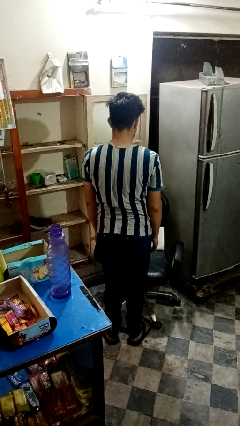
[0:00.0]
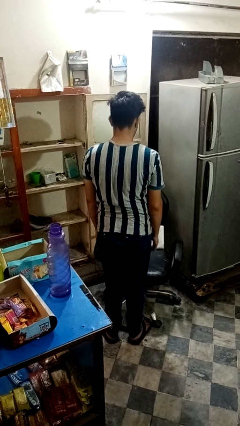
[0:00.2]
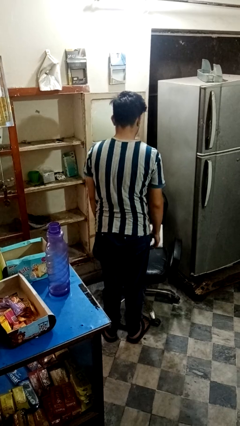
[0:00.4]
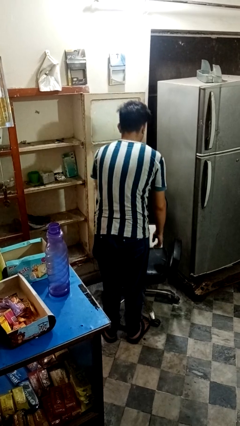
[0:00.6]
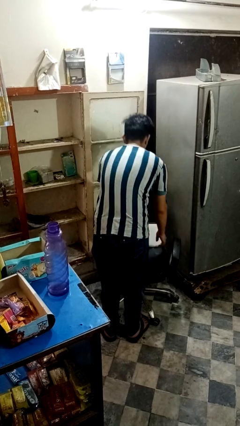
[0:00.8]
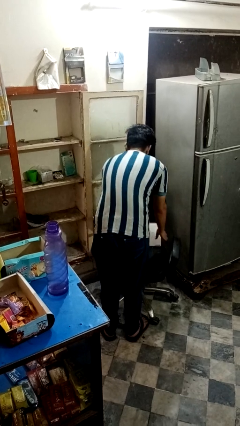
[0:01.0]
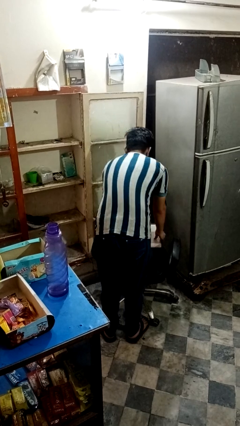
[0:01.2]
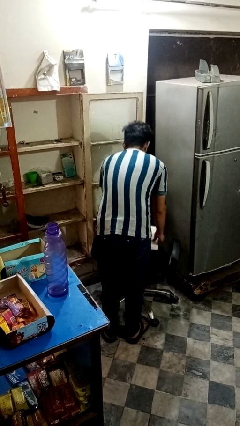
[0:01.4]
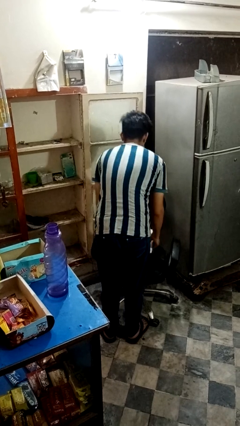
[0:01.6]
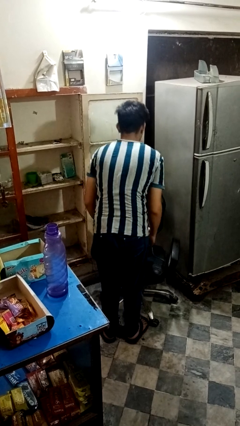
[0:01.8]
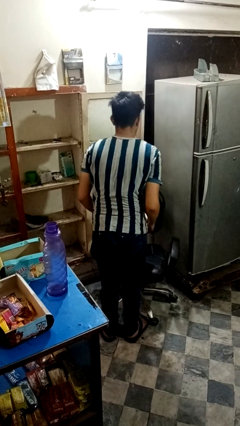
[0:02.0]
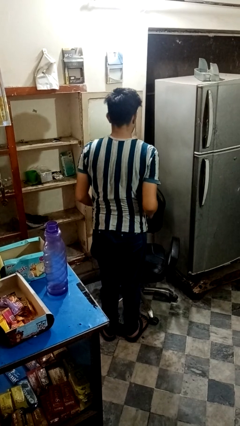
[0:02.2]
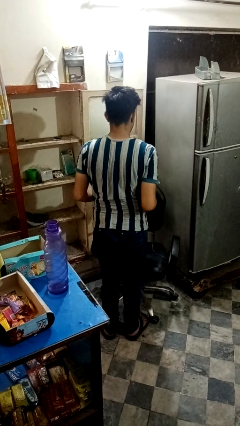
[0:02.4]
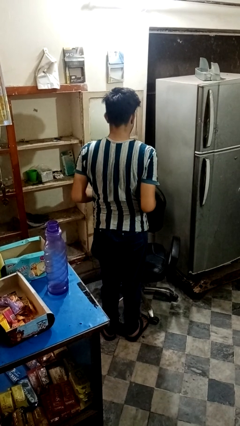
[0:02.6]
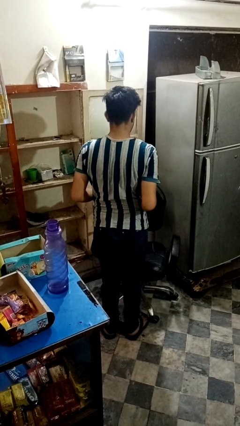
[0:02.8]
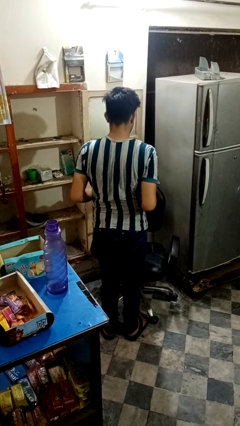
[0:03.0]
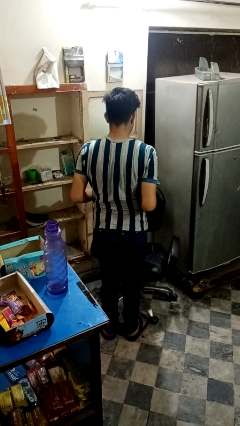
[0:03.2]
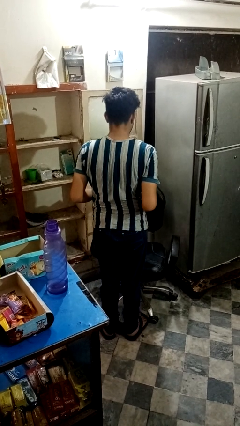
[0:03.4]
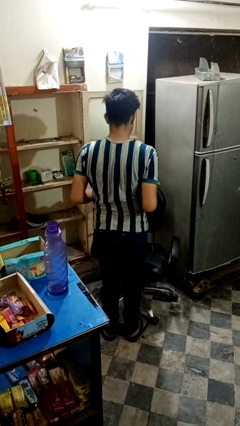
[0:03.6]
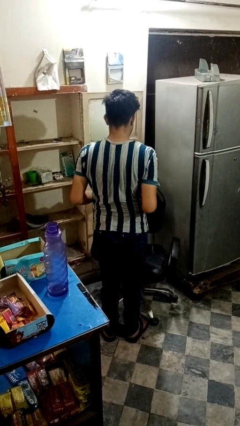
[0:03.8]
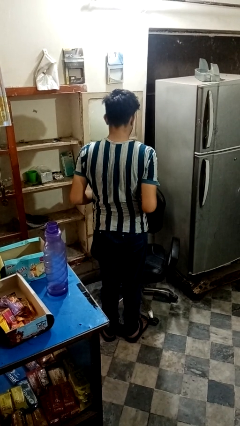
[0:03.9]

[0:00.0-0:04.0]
person picks up object from couch

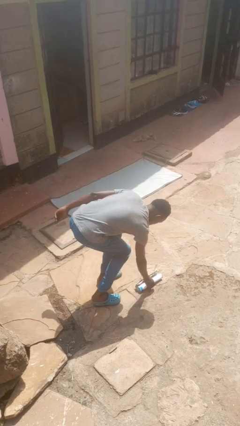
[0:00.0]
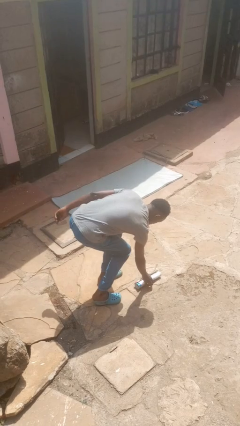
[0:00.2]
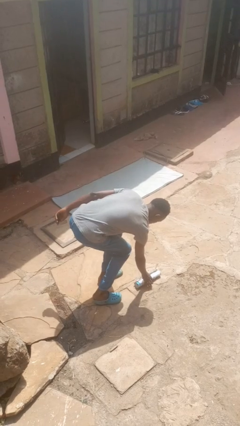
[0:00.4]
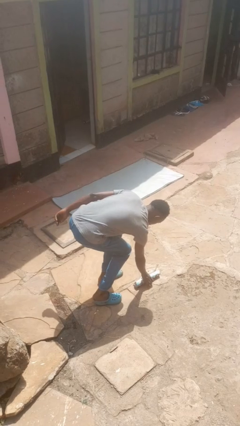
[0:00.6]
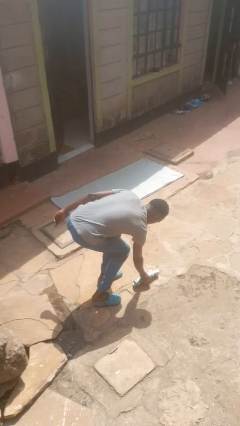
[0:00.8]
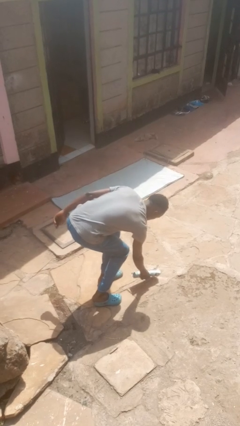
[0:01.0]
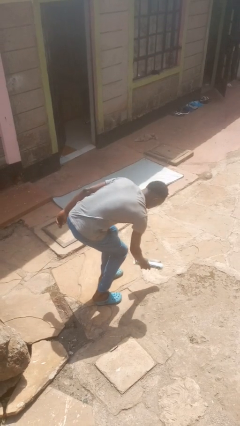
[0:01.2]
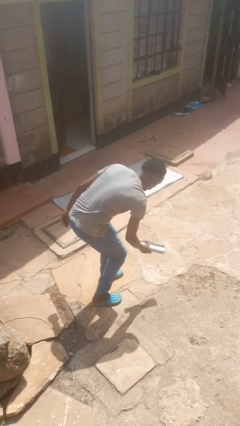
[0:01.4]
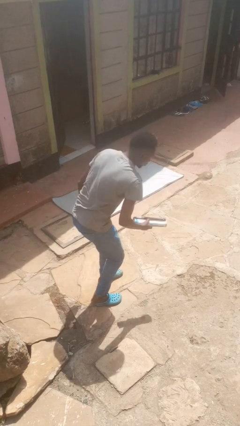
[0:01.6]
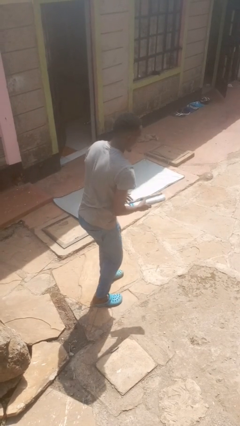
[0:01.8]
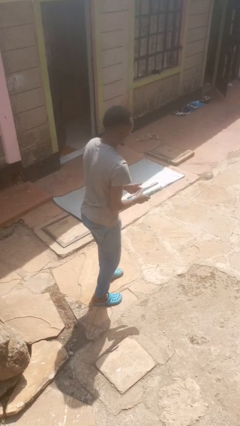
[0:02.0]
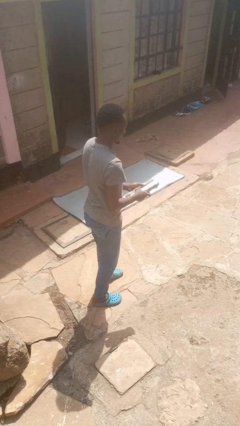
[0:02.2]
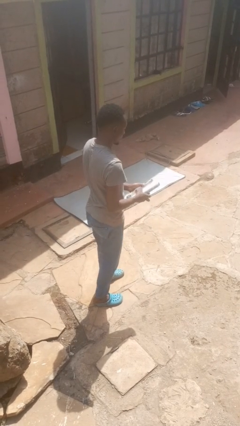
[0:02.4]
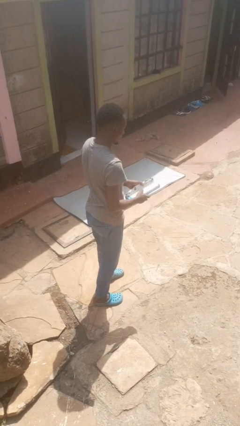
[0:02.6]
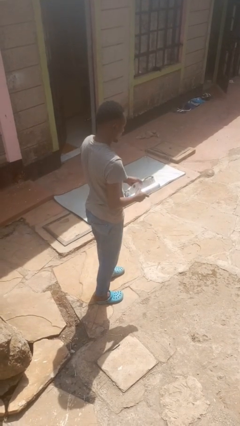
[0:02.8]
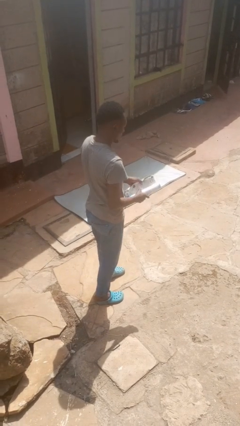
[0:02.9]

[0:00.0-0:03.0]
person picks up object from floor

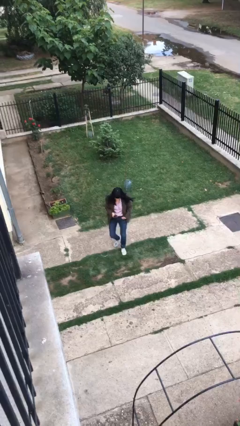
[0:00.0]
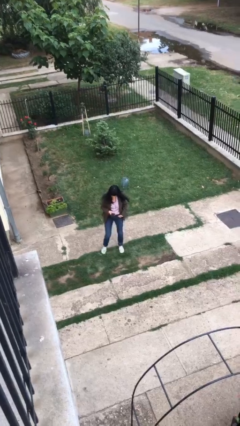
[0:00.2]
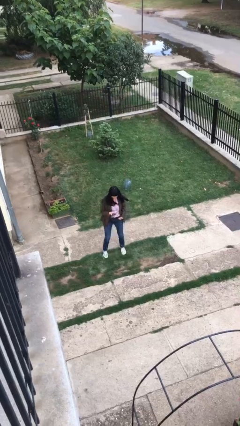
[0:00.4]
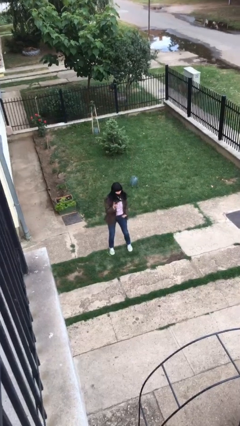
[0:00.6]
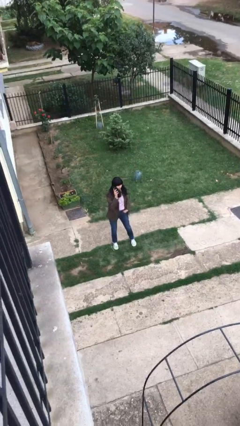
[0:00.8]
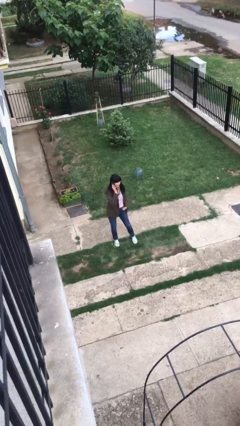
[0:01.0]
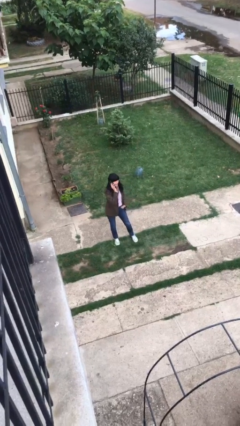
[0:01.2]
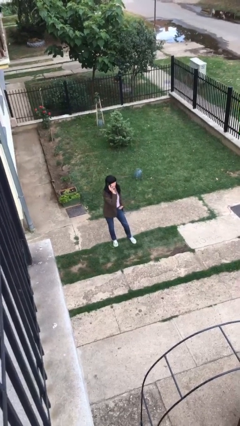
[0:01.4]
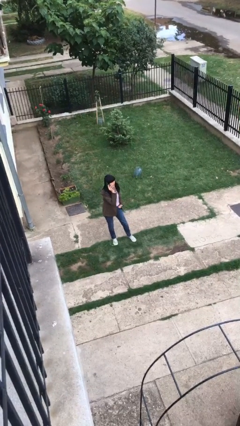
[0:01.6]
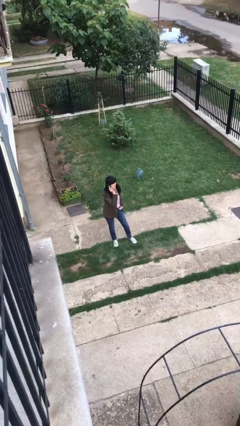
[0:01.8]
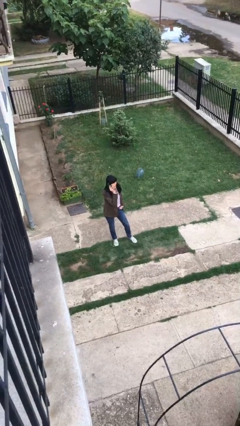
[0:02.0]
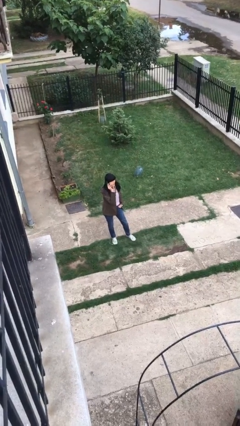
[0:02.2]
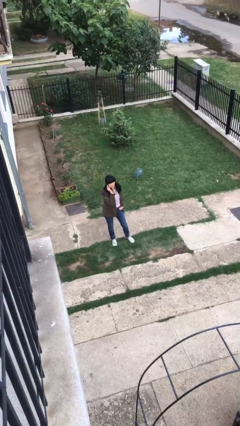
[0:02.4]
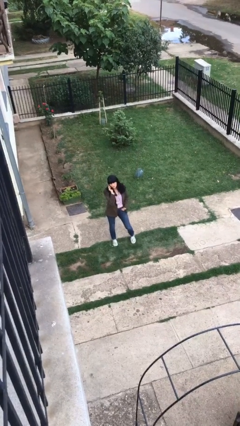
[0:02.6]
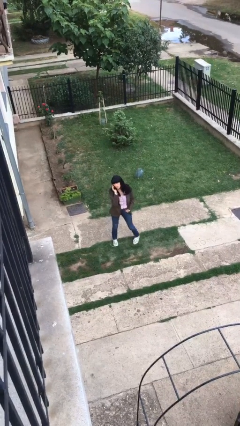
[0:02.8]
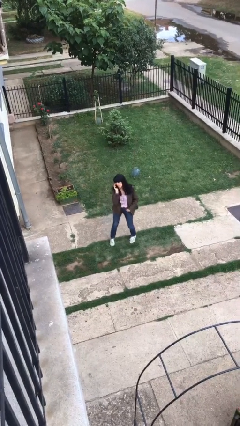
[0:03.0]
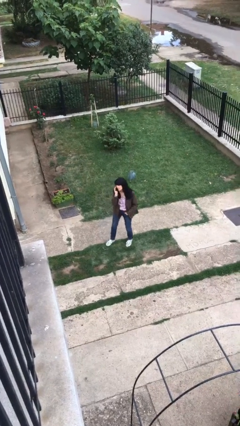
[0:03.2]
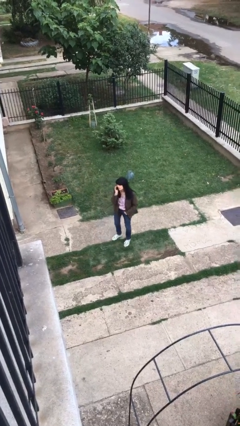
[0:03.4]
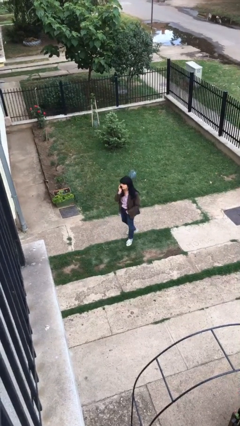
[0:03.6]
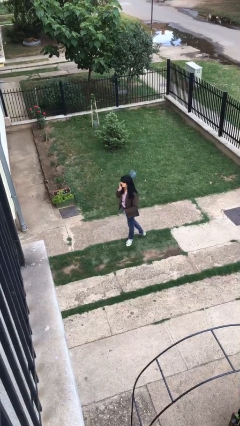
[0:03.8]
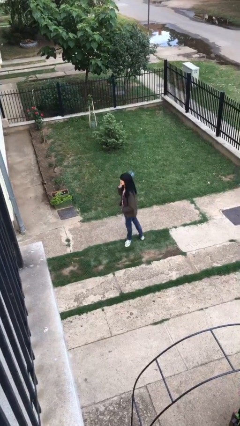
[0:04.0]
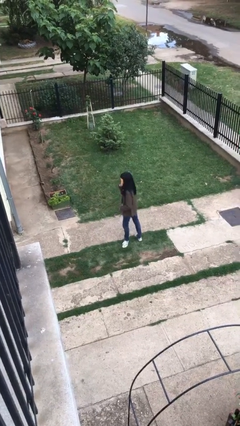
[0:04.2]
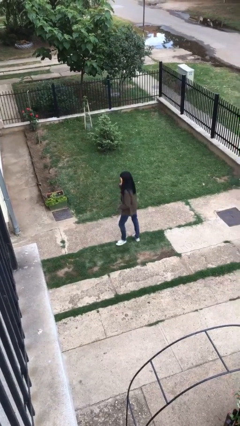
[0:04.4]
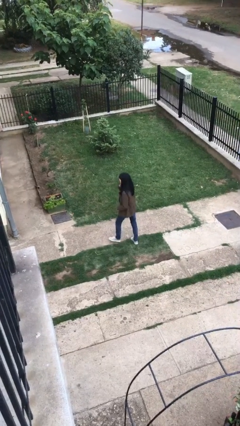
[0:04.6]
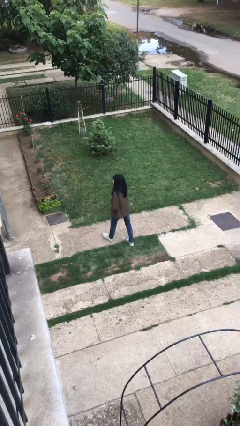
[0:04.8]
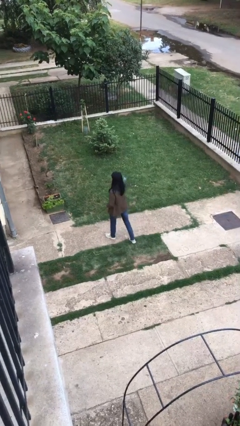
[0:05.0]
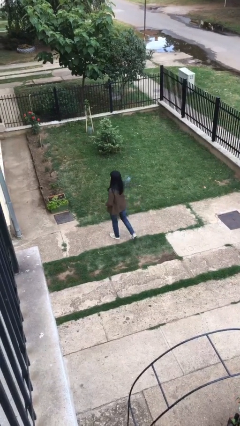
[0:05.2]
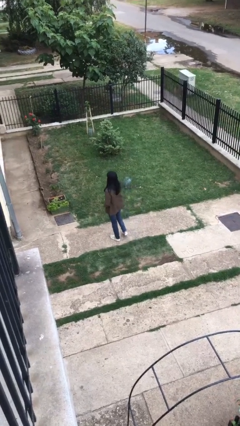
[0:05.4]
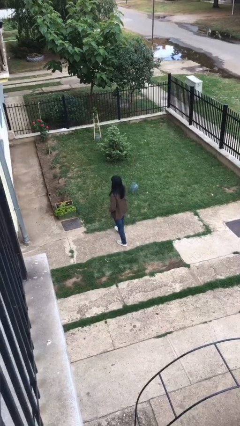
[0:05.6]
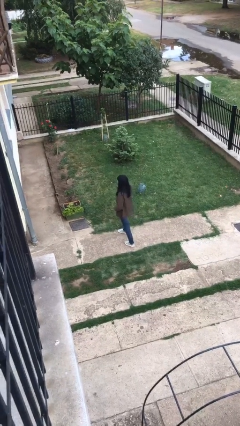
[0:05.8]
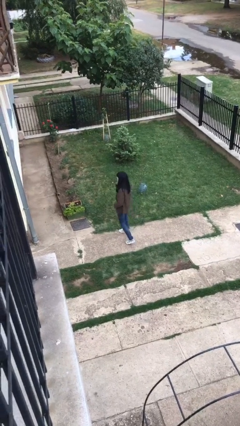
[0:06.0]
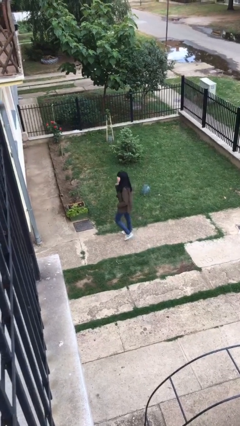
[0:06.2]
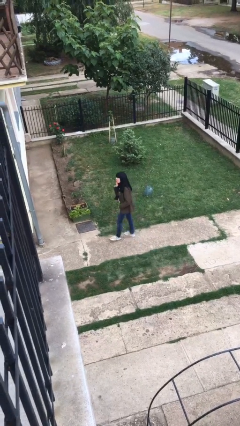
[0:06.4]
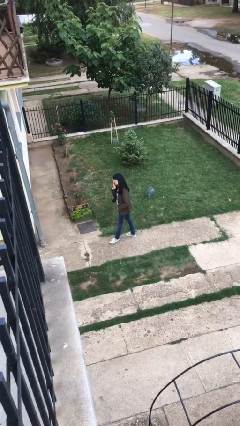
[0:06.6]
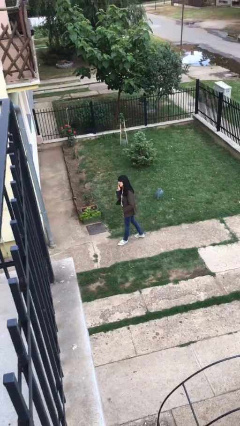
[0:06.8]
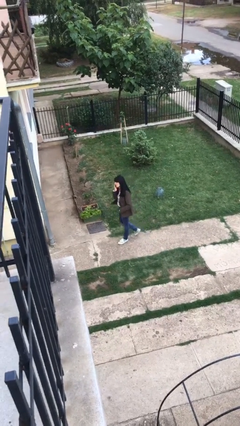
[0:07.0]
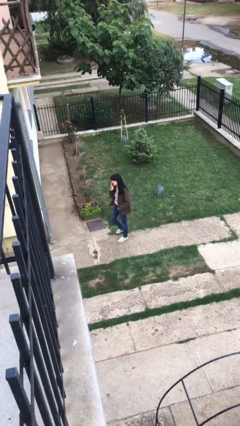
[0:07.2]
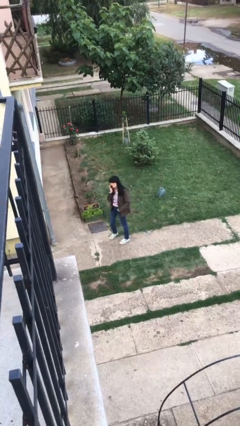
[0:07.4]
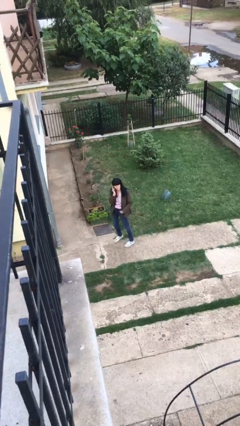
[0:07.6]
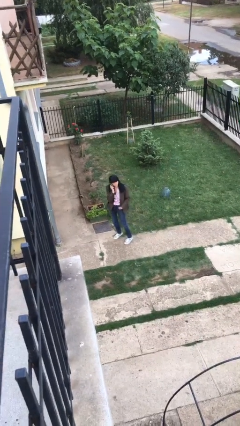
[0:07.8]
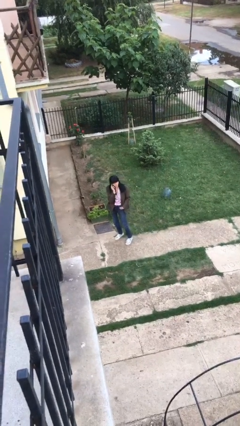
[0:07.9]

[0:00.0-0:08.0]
person talks on phone

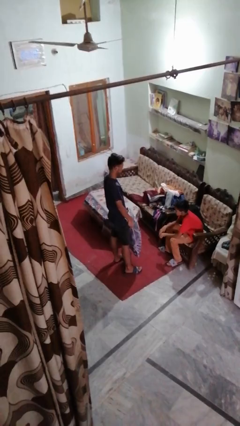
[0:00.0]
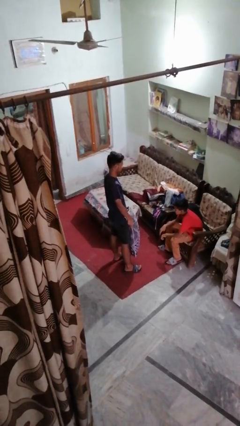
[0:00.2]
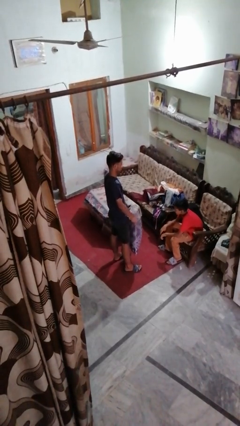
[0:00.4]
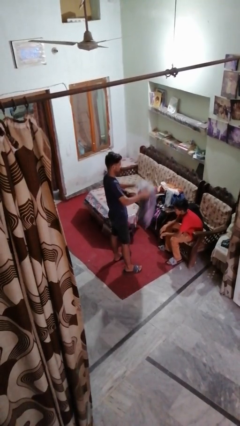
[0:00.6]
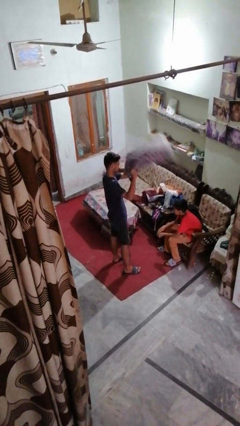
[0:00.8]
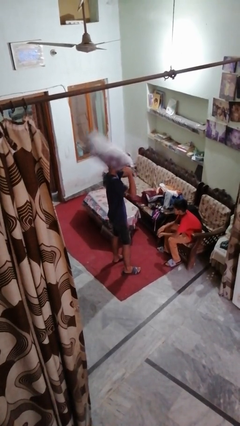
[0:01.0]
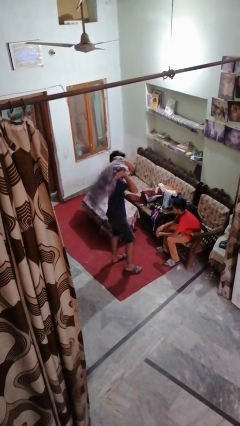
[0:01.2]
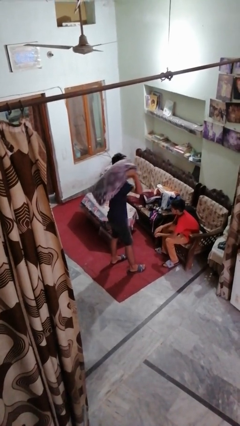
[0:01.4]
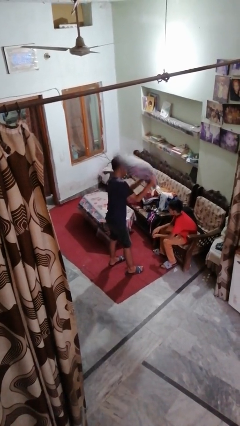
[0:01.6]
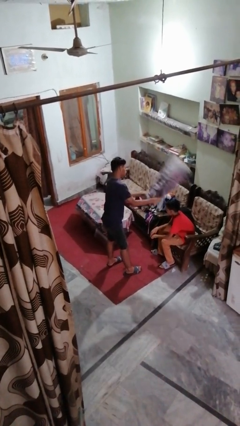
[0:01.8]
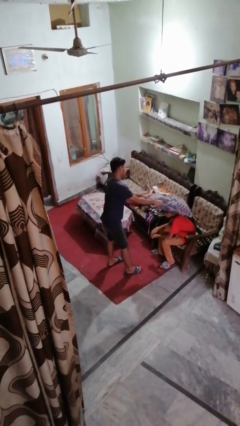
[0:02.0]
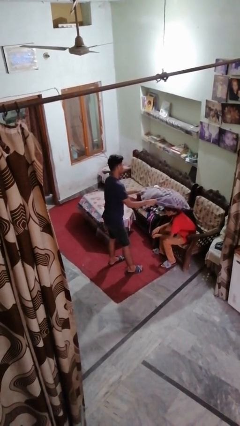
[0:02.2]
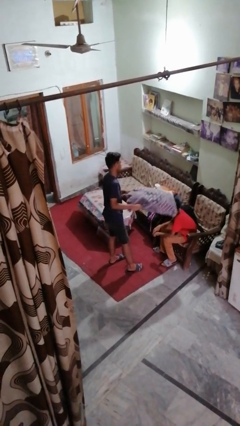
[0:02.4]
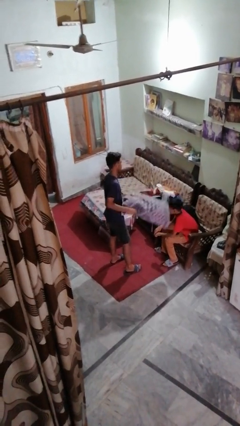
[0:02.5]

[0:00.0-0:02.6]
person hits person with pillow

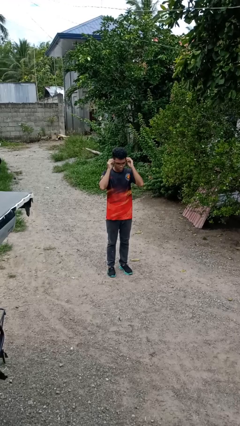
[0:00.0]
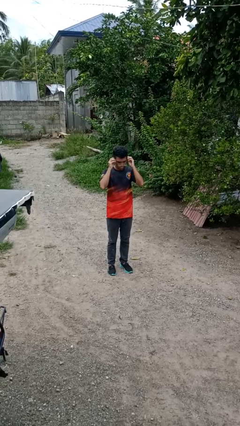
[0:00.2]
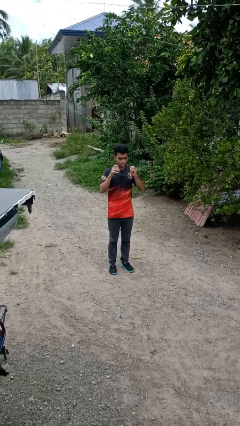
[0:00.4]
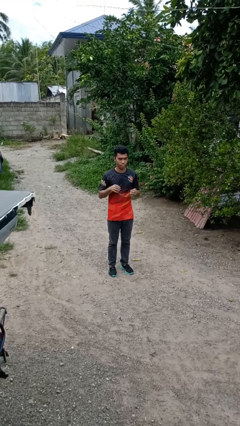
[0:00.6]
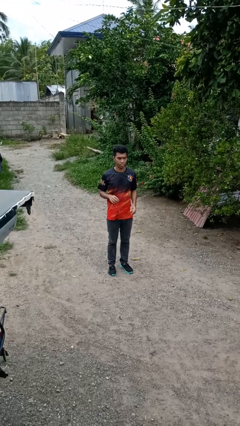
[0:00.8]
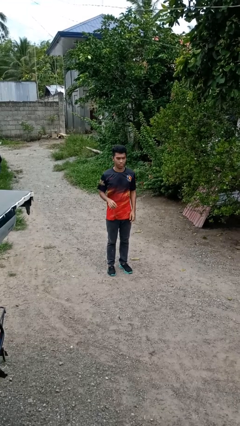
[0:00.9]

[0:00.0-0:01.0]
person takes off glasses
